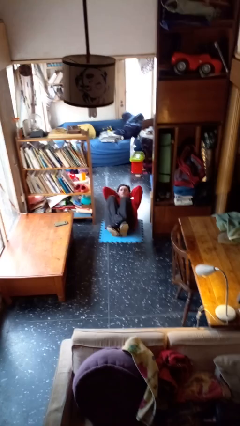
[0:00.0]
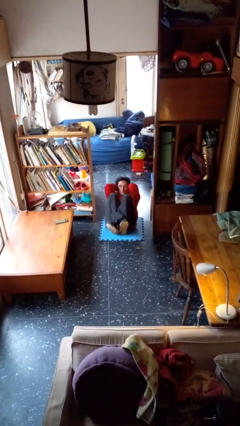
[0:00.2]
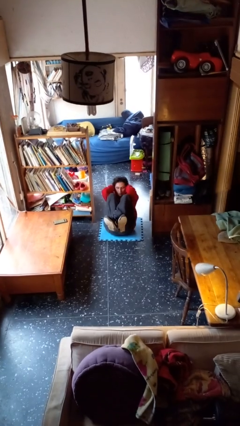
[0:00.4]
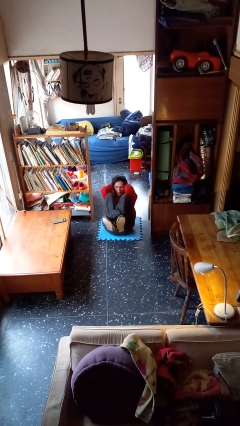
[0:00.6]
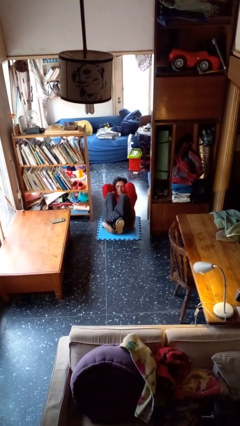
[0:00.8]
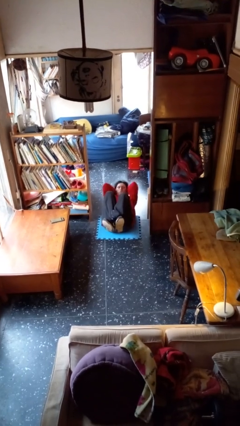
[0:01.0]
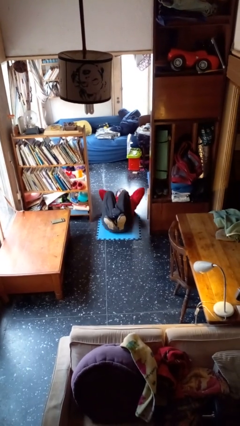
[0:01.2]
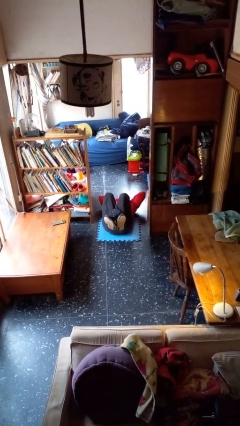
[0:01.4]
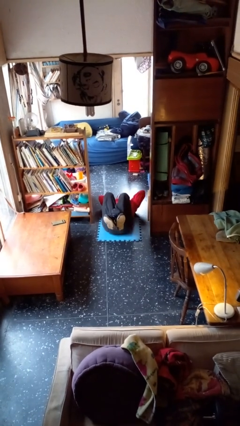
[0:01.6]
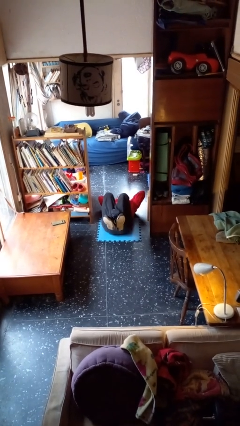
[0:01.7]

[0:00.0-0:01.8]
person exercises with situp

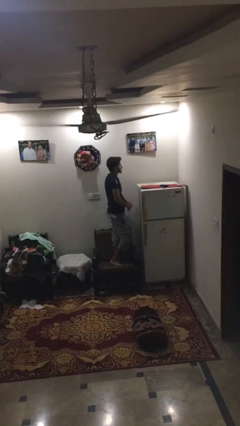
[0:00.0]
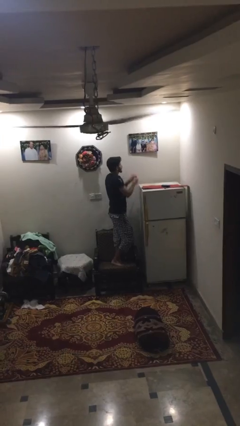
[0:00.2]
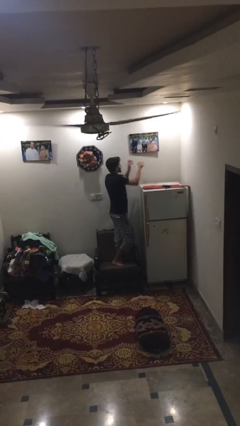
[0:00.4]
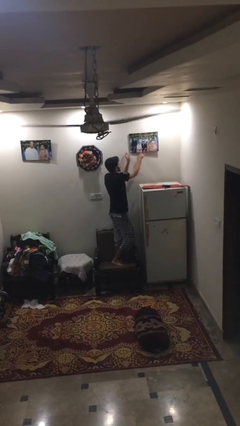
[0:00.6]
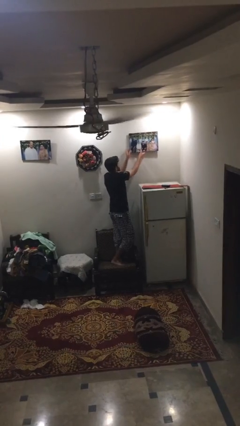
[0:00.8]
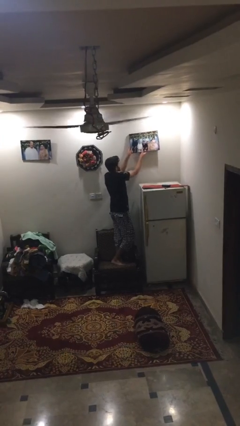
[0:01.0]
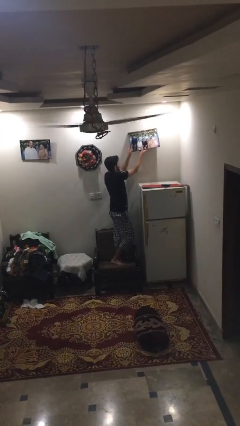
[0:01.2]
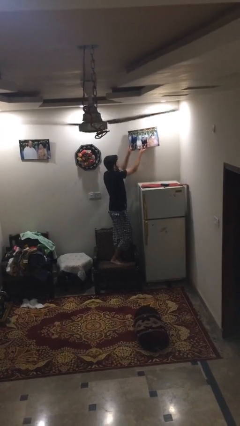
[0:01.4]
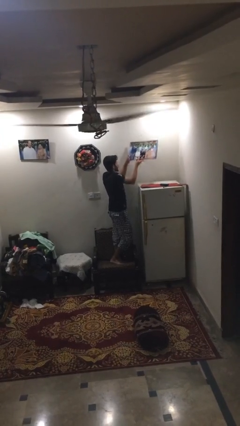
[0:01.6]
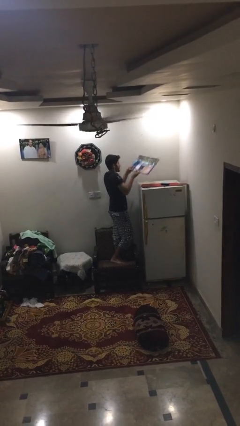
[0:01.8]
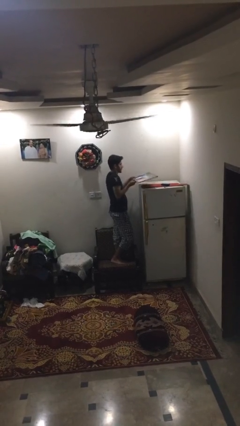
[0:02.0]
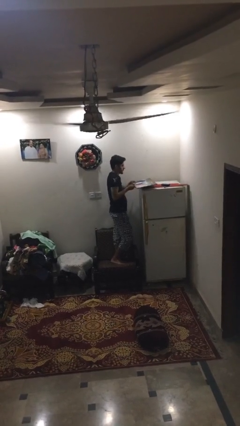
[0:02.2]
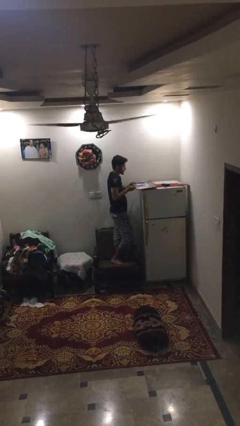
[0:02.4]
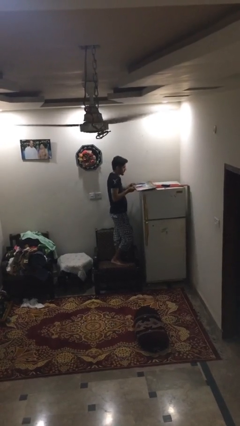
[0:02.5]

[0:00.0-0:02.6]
person takes down picture frame

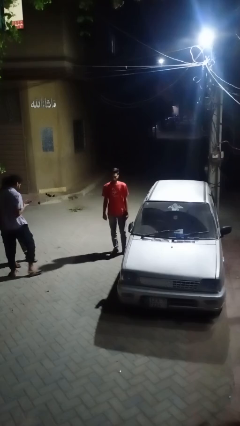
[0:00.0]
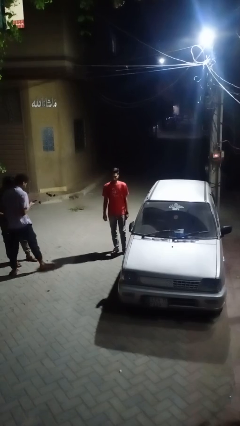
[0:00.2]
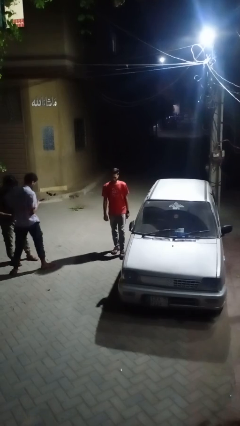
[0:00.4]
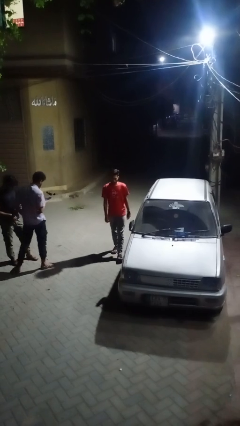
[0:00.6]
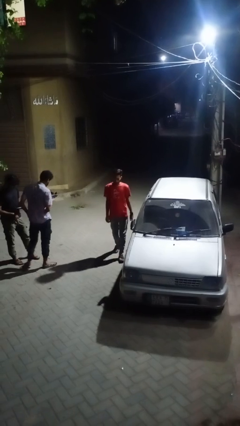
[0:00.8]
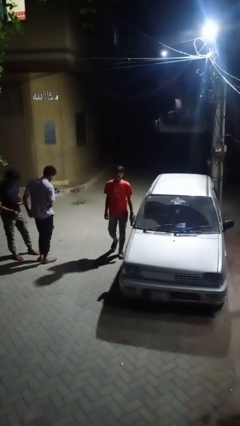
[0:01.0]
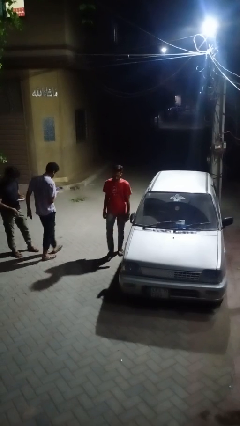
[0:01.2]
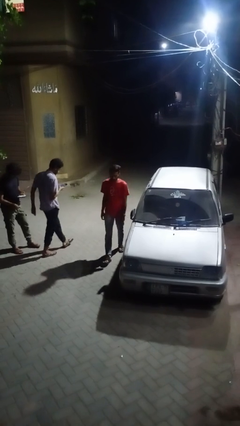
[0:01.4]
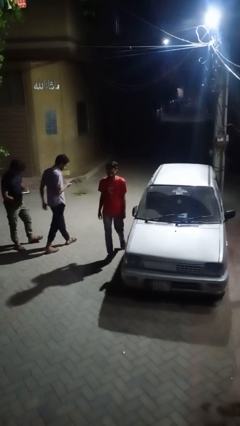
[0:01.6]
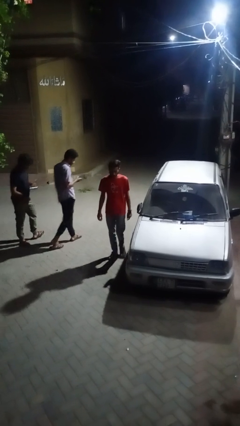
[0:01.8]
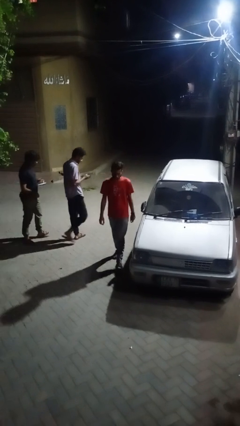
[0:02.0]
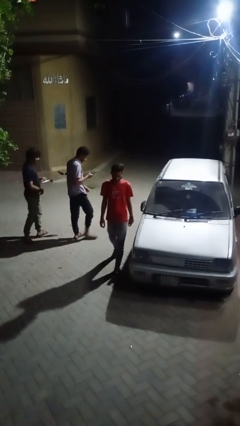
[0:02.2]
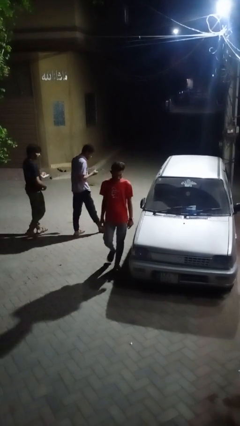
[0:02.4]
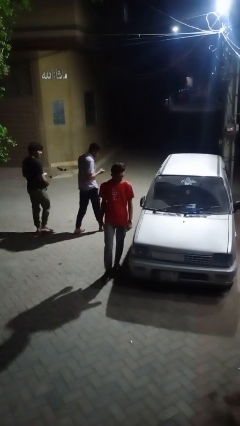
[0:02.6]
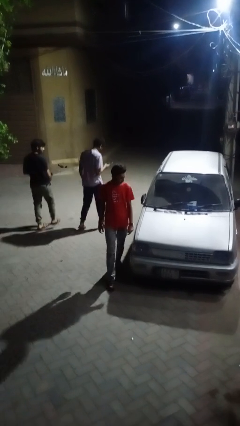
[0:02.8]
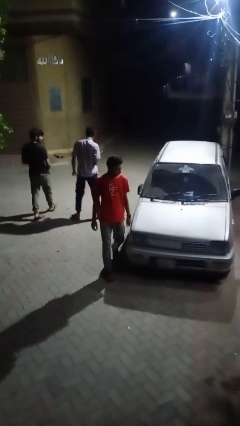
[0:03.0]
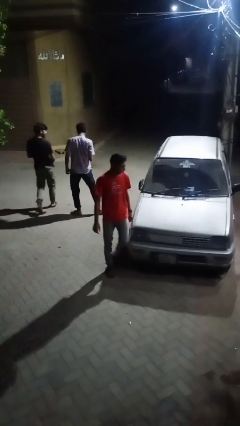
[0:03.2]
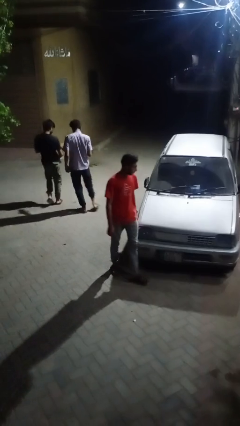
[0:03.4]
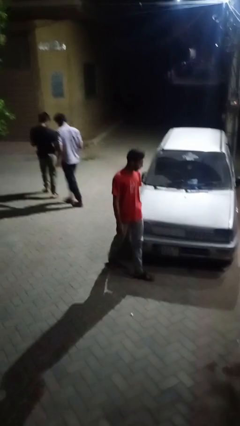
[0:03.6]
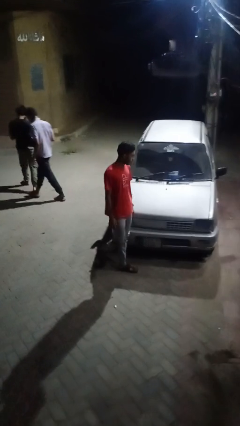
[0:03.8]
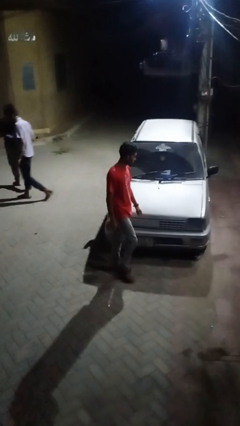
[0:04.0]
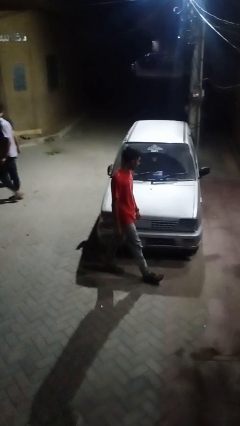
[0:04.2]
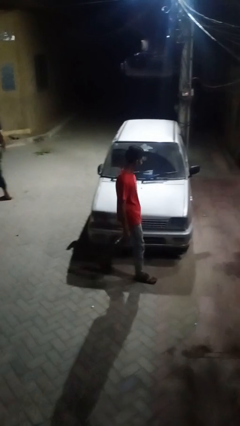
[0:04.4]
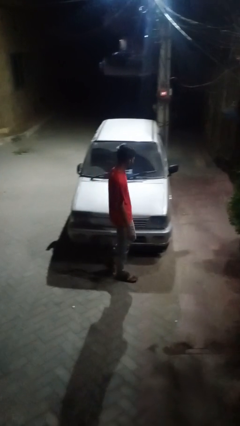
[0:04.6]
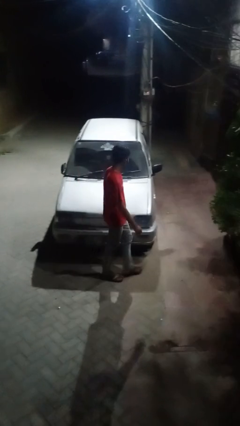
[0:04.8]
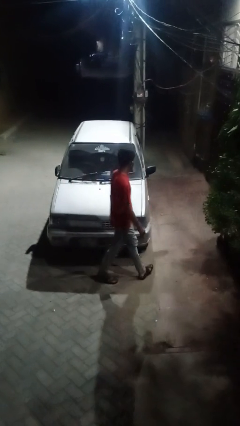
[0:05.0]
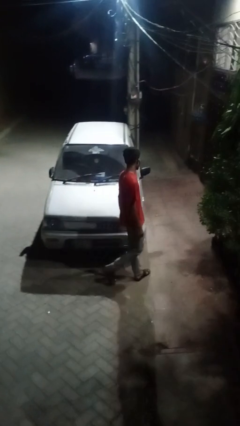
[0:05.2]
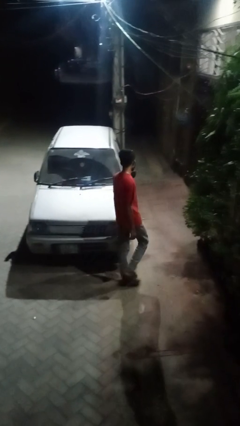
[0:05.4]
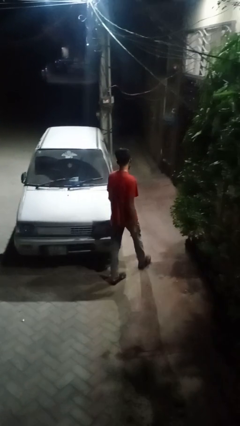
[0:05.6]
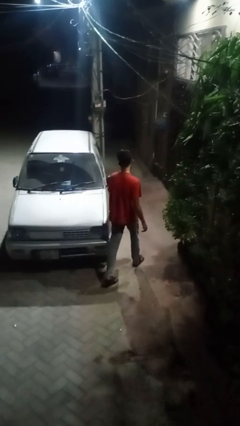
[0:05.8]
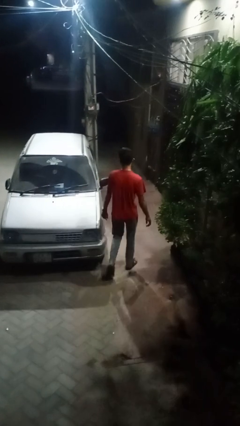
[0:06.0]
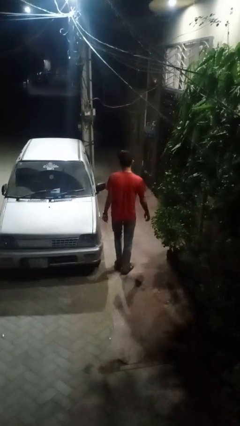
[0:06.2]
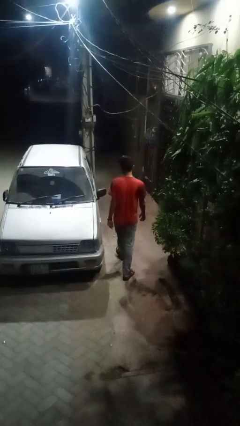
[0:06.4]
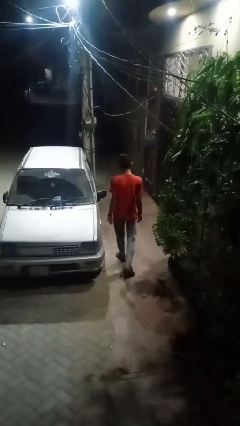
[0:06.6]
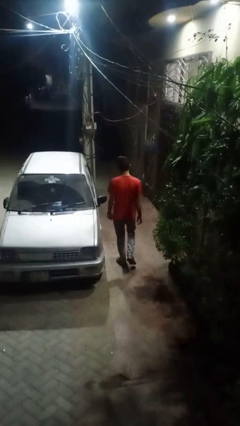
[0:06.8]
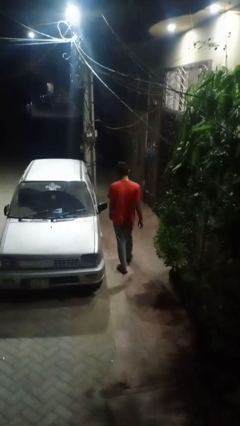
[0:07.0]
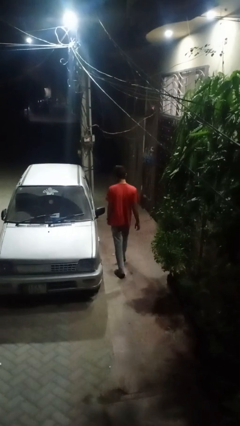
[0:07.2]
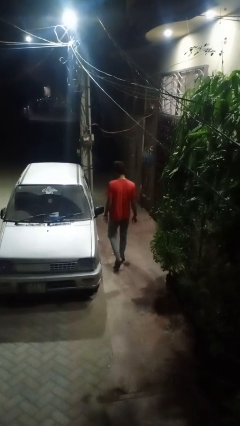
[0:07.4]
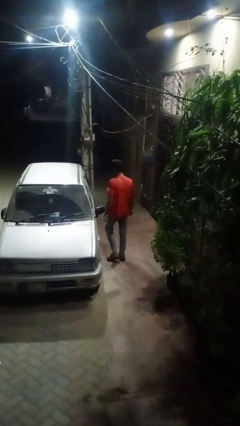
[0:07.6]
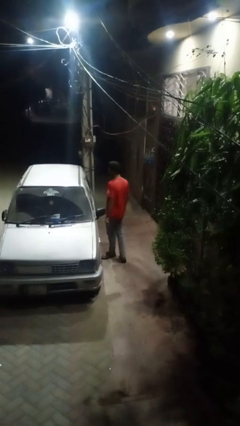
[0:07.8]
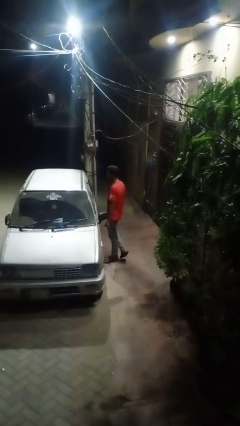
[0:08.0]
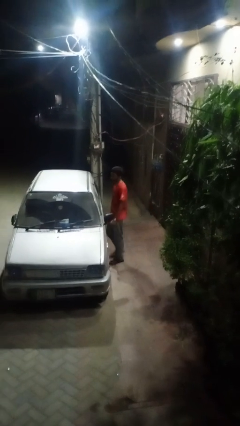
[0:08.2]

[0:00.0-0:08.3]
person walks around car

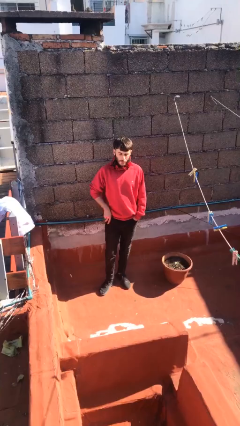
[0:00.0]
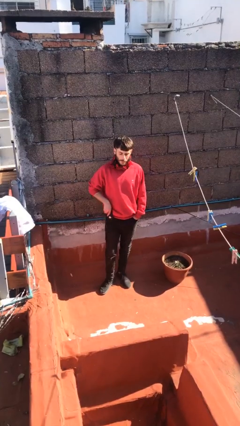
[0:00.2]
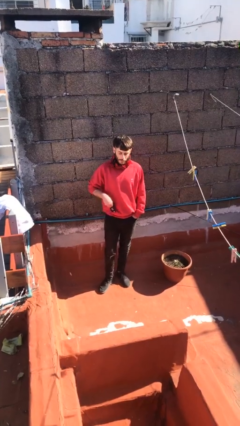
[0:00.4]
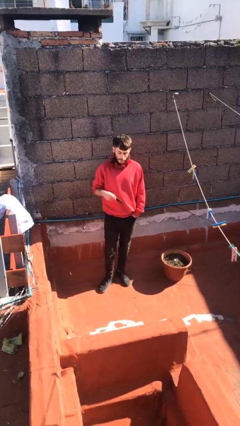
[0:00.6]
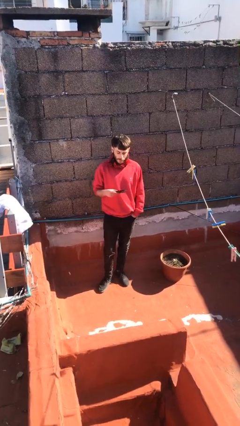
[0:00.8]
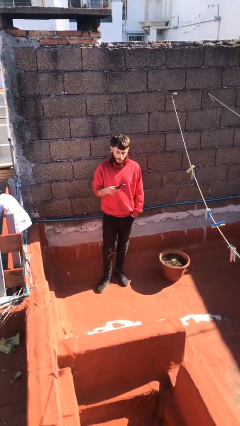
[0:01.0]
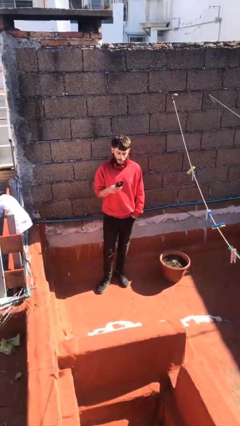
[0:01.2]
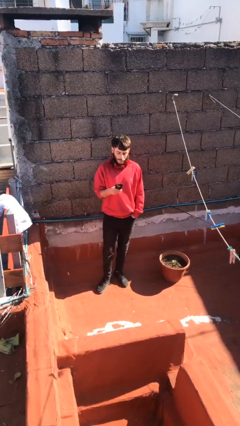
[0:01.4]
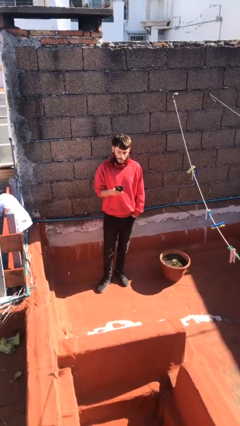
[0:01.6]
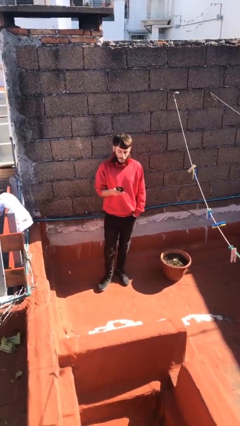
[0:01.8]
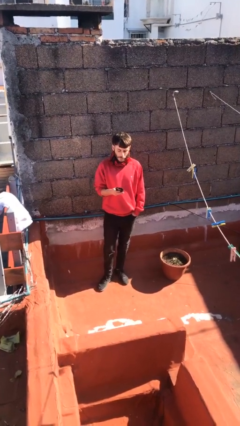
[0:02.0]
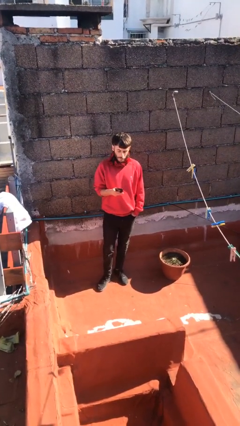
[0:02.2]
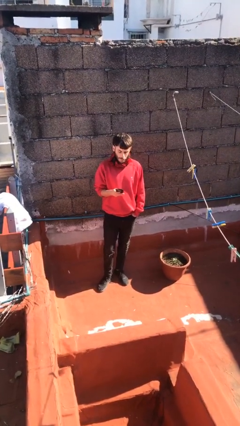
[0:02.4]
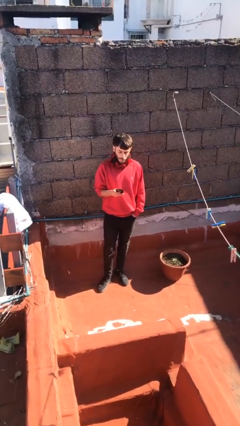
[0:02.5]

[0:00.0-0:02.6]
person takes phone from pocket

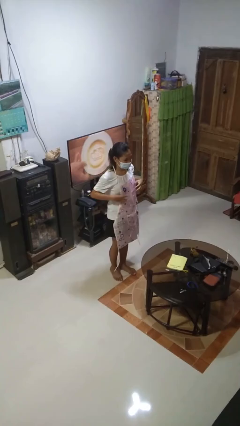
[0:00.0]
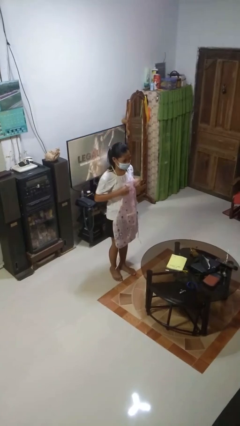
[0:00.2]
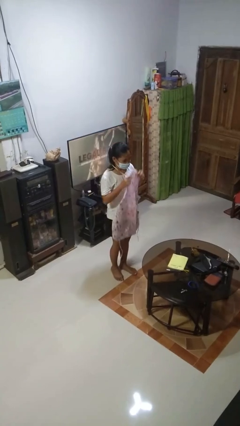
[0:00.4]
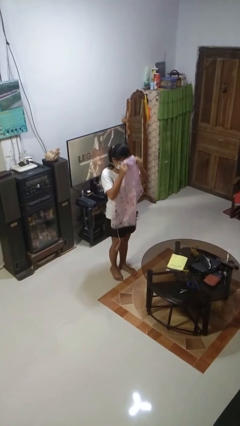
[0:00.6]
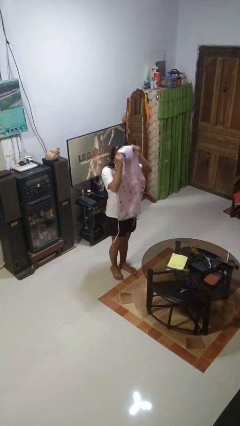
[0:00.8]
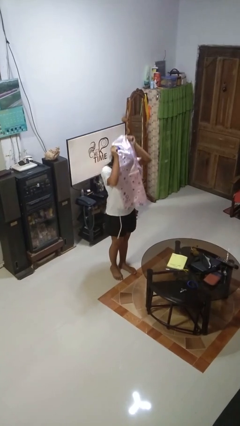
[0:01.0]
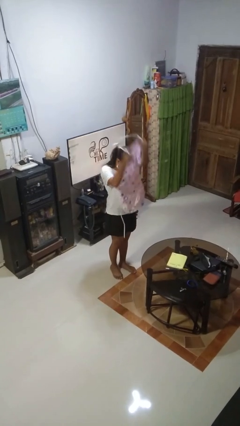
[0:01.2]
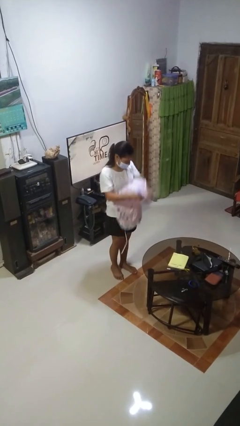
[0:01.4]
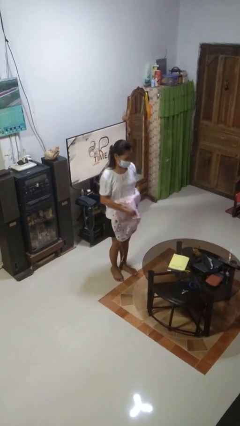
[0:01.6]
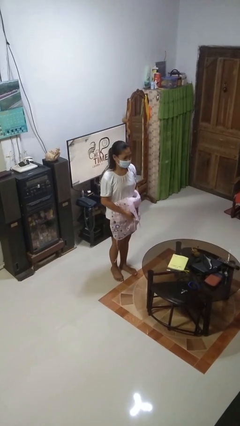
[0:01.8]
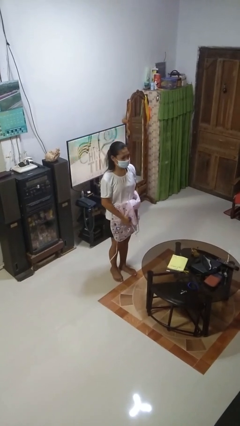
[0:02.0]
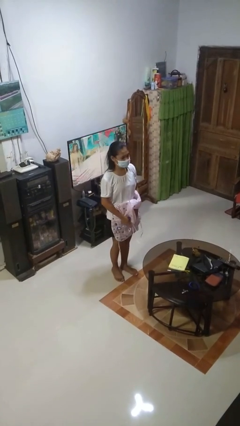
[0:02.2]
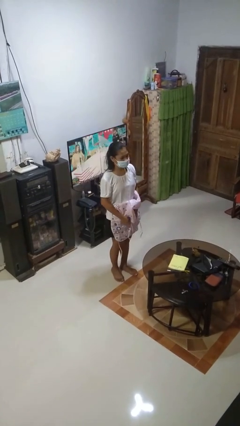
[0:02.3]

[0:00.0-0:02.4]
person takes off apron
